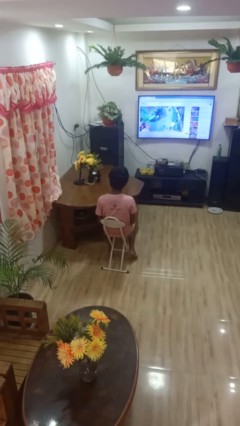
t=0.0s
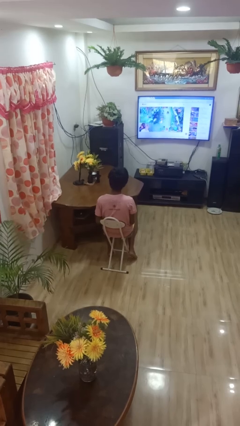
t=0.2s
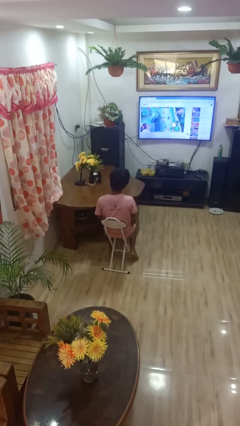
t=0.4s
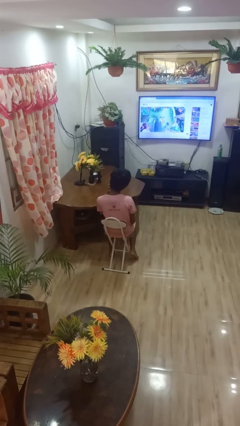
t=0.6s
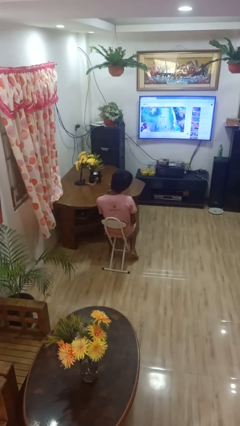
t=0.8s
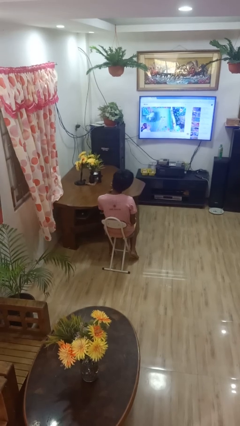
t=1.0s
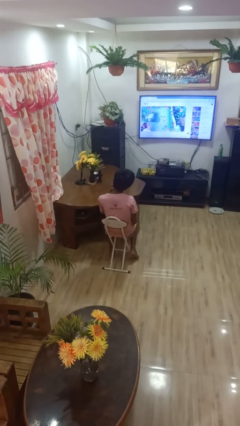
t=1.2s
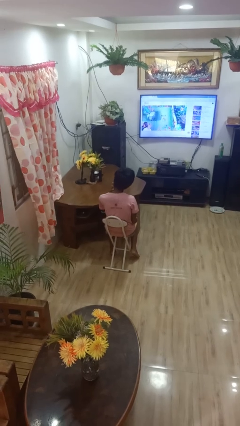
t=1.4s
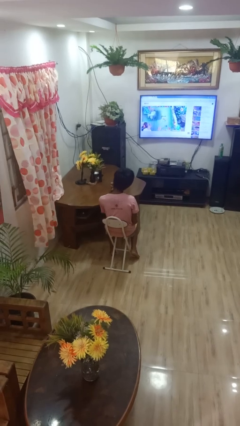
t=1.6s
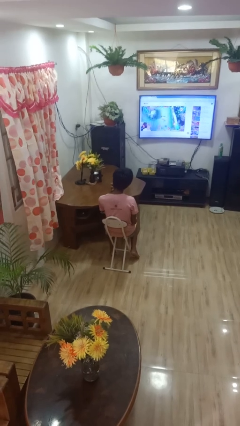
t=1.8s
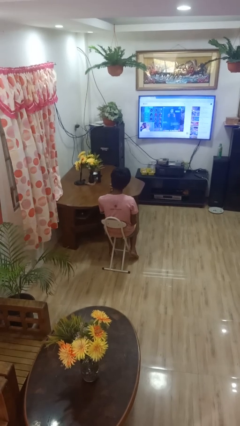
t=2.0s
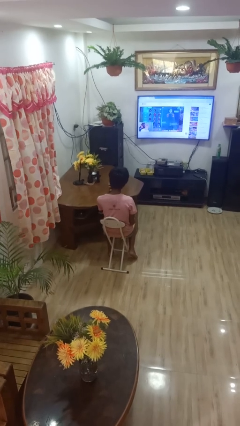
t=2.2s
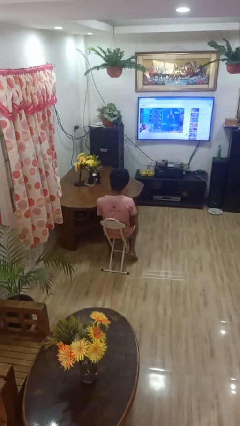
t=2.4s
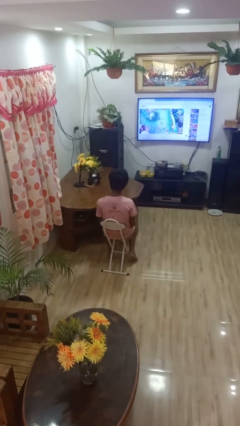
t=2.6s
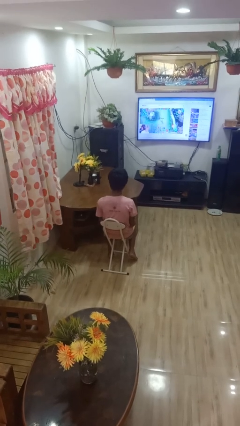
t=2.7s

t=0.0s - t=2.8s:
person rubs neck

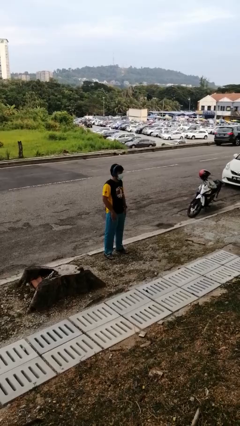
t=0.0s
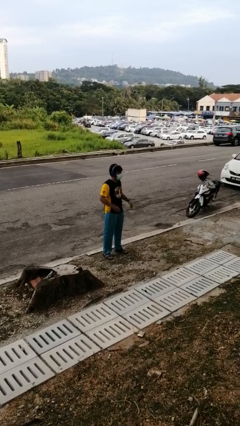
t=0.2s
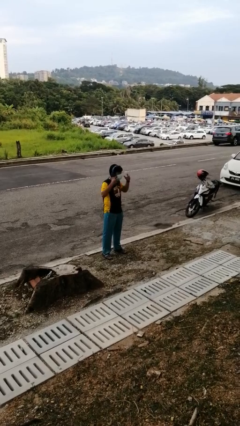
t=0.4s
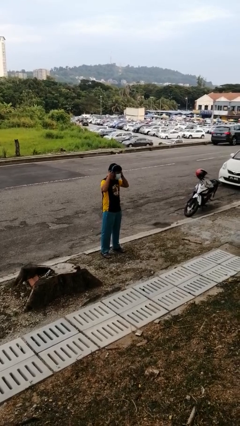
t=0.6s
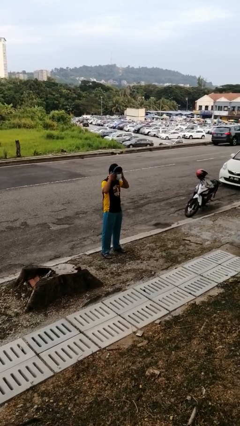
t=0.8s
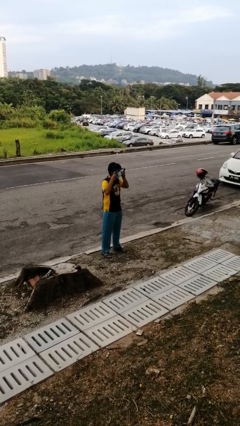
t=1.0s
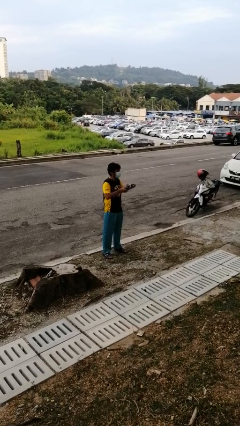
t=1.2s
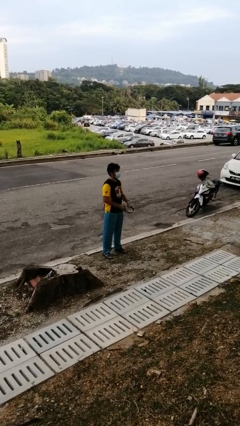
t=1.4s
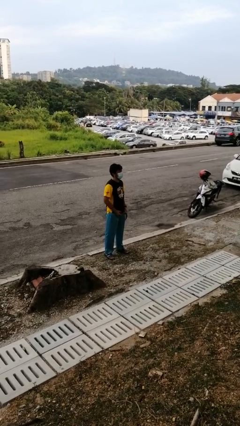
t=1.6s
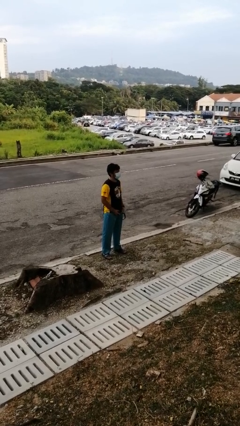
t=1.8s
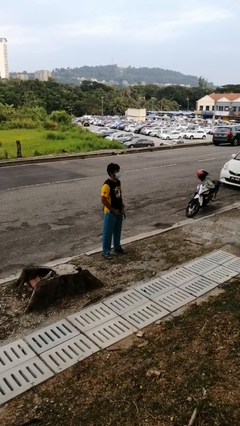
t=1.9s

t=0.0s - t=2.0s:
person takes off headphones

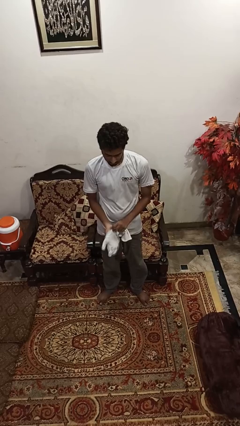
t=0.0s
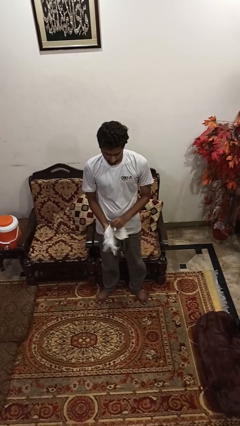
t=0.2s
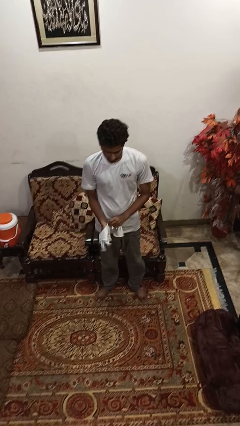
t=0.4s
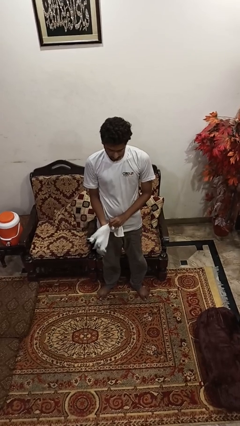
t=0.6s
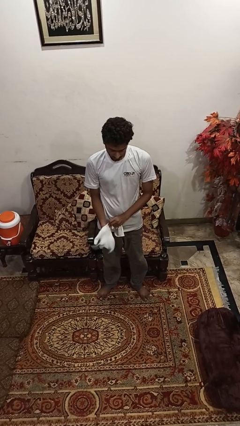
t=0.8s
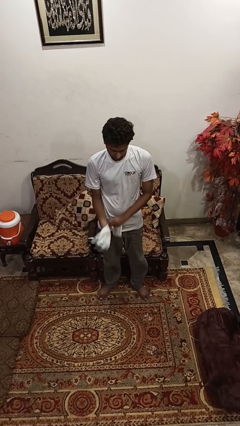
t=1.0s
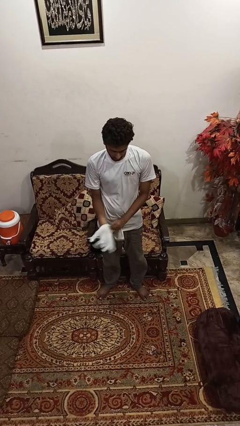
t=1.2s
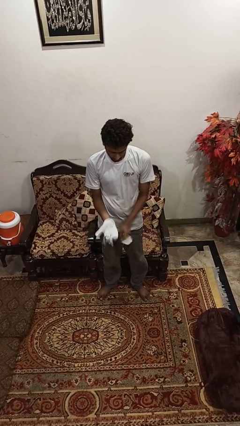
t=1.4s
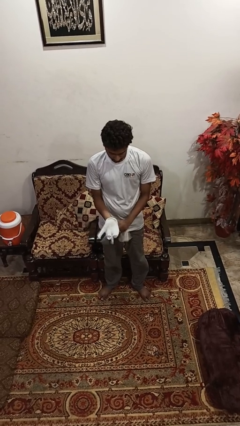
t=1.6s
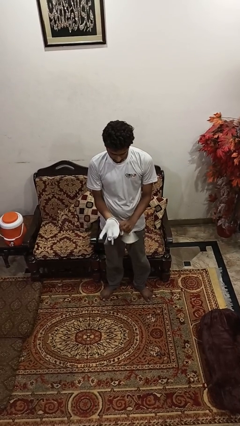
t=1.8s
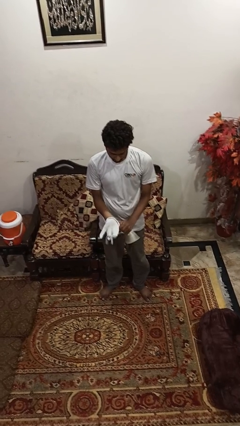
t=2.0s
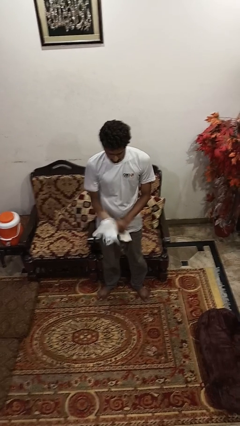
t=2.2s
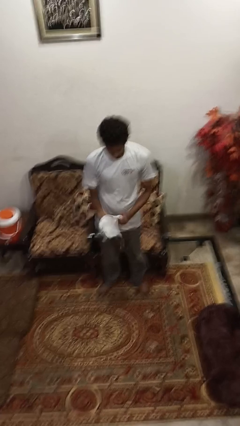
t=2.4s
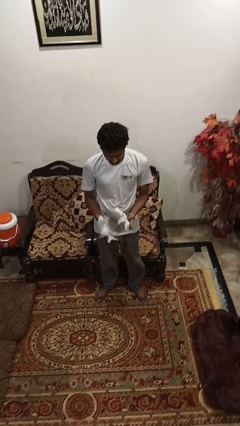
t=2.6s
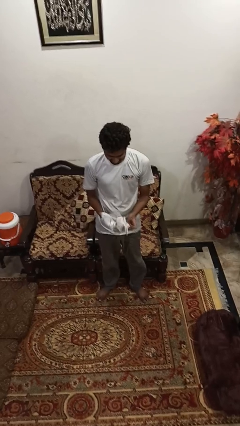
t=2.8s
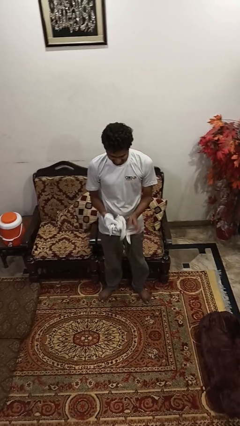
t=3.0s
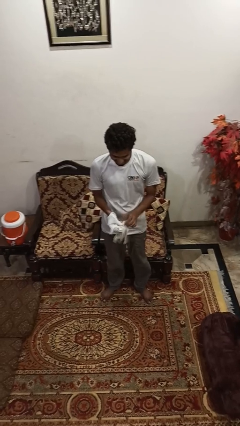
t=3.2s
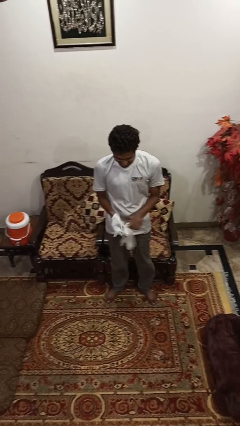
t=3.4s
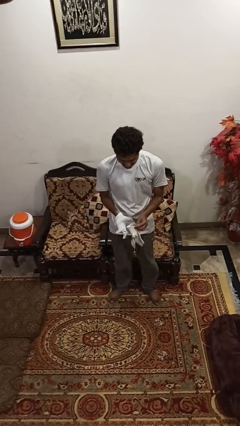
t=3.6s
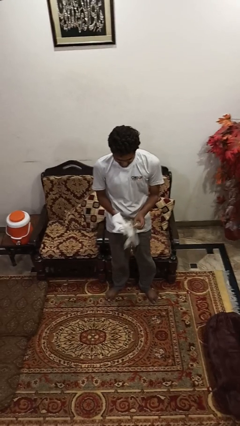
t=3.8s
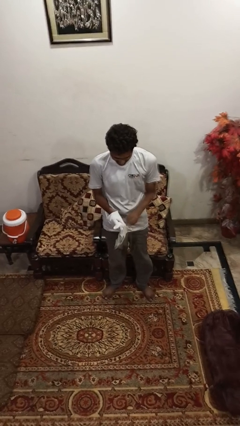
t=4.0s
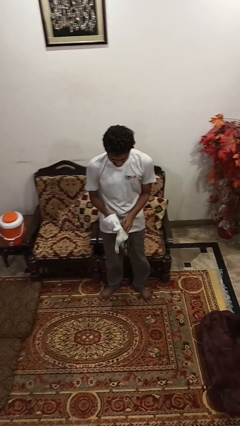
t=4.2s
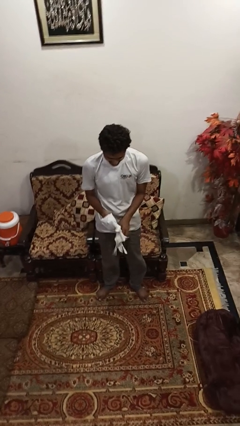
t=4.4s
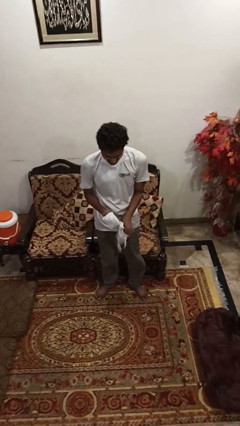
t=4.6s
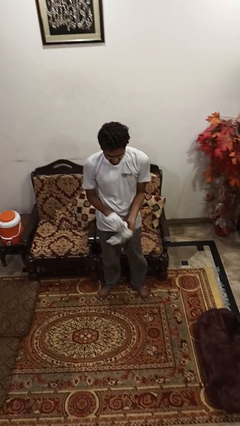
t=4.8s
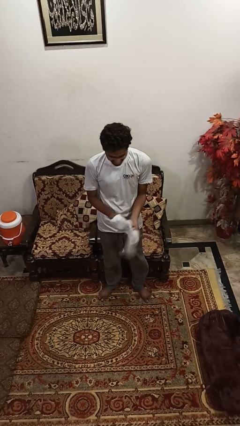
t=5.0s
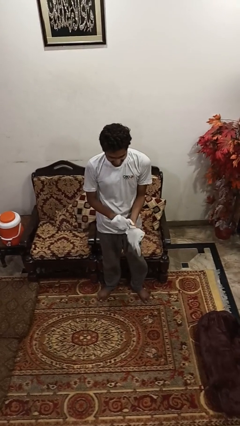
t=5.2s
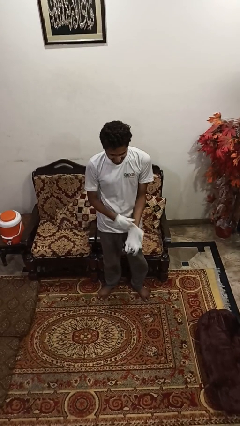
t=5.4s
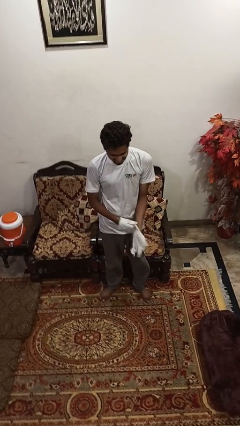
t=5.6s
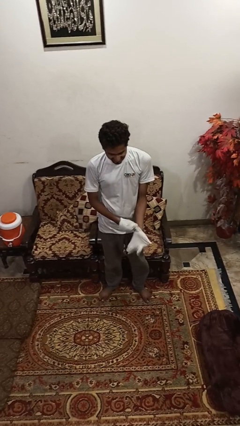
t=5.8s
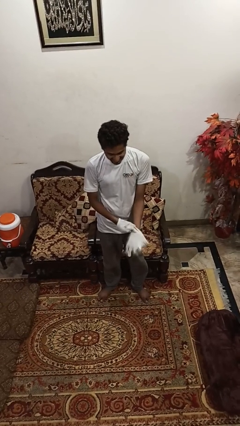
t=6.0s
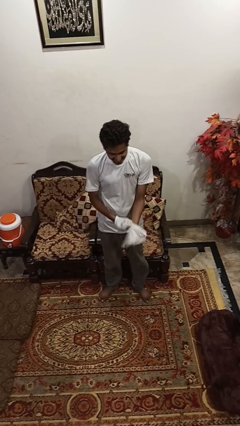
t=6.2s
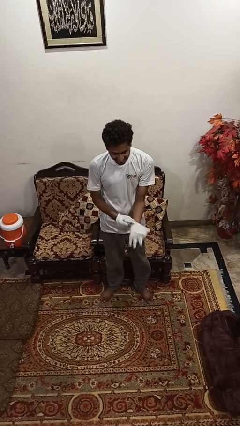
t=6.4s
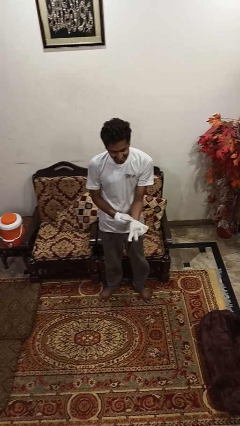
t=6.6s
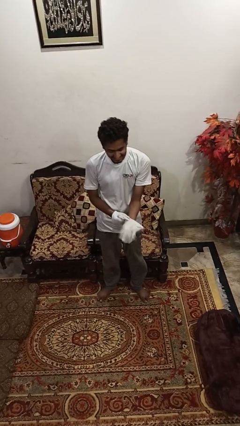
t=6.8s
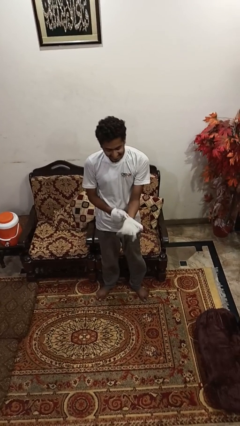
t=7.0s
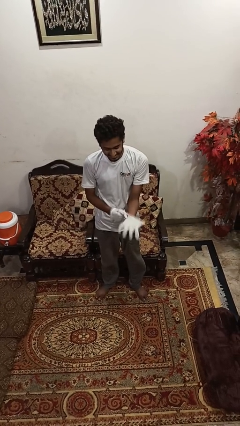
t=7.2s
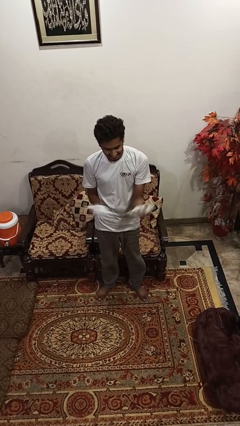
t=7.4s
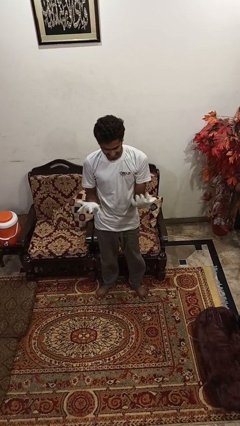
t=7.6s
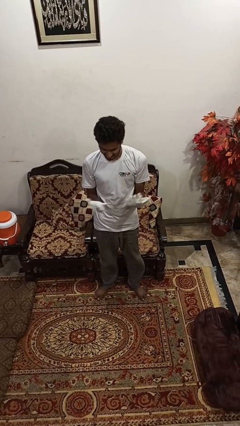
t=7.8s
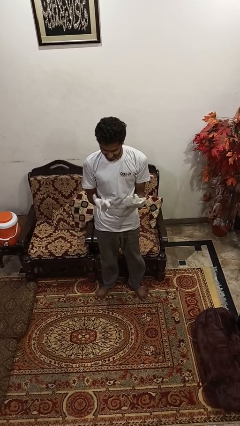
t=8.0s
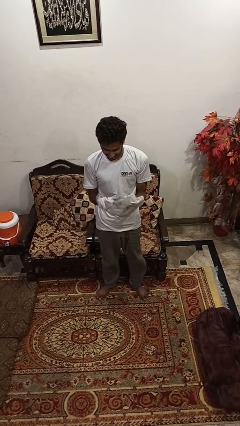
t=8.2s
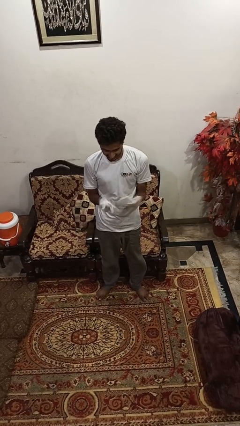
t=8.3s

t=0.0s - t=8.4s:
person puts on gloves

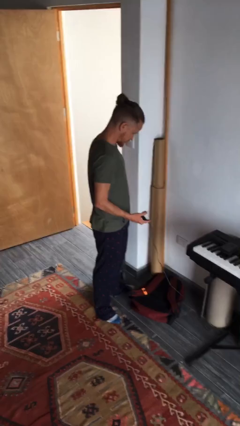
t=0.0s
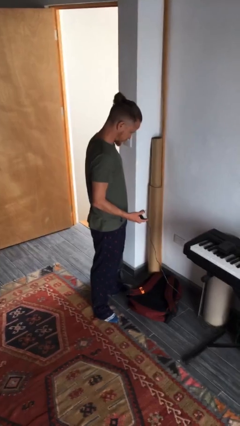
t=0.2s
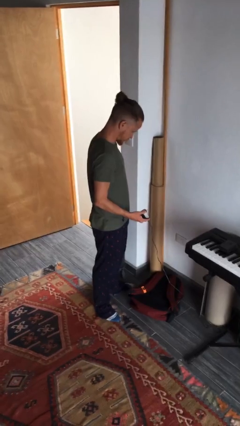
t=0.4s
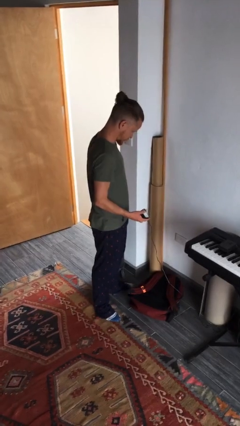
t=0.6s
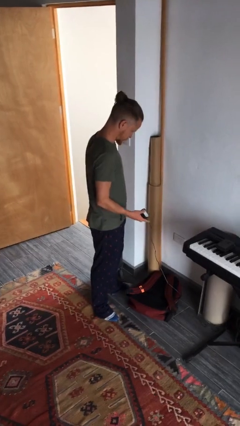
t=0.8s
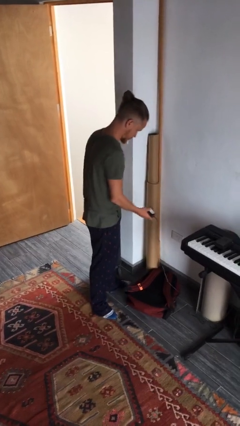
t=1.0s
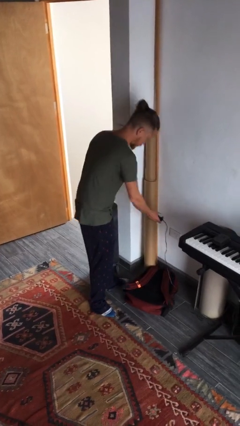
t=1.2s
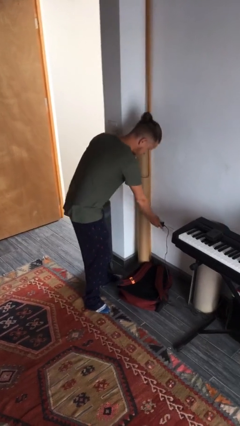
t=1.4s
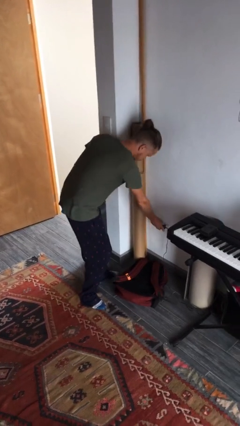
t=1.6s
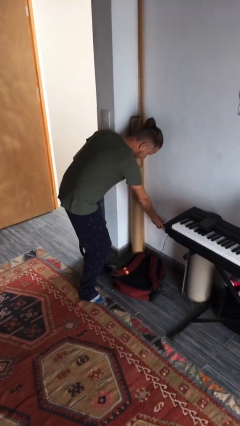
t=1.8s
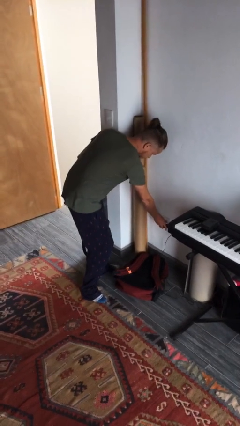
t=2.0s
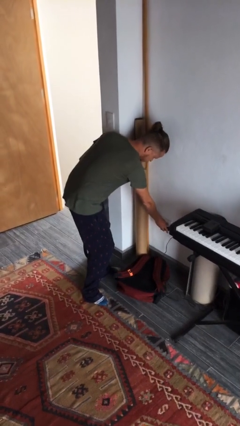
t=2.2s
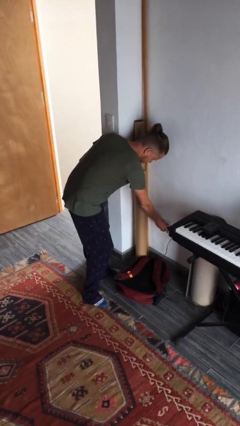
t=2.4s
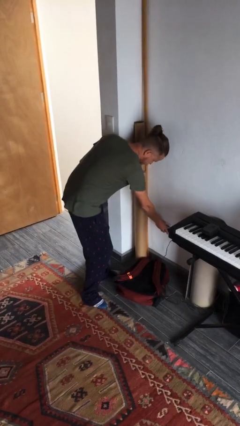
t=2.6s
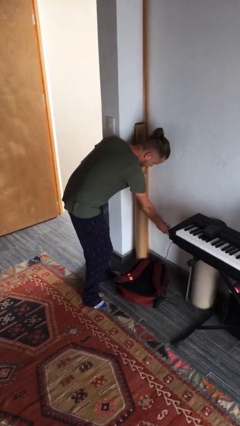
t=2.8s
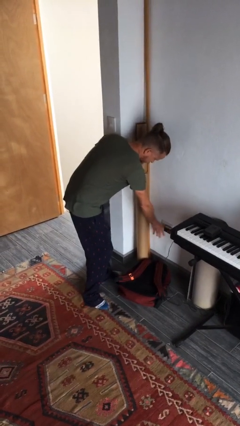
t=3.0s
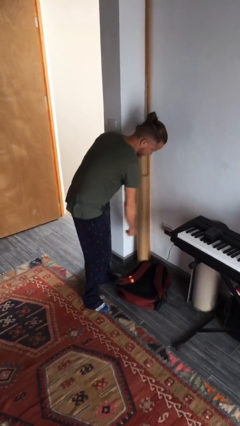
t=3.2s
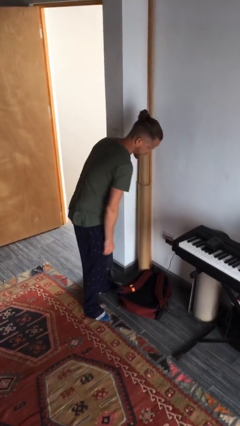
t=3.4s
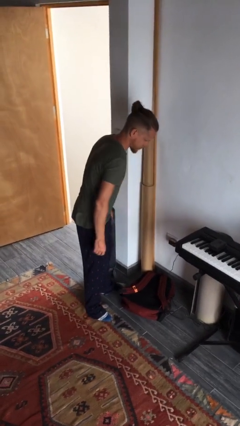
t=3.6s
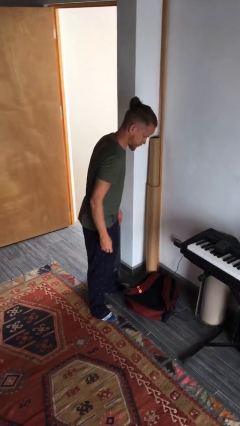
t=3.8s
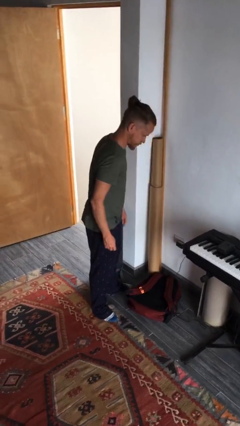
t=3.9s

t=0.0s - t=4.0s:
person plugs into electrical socket

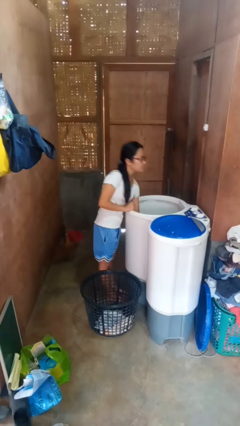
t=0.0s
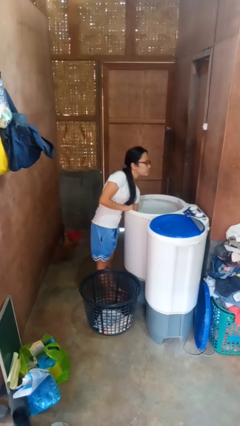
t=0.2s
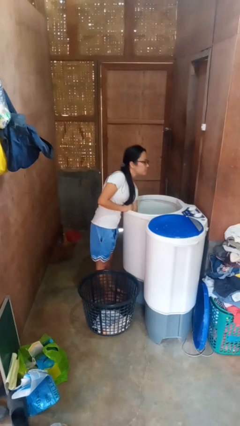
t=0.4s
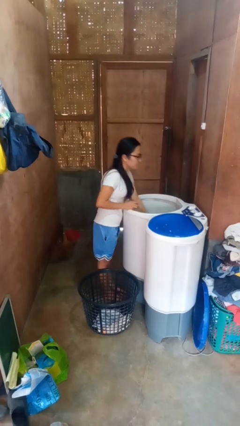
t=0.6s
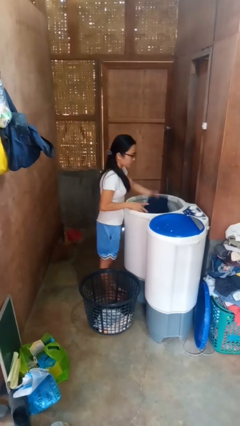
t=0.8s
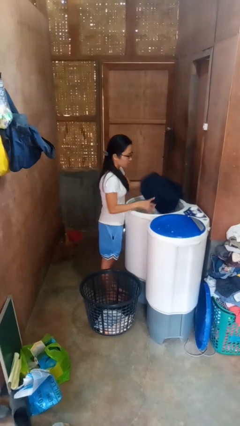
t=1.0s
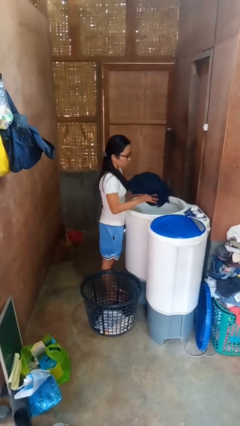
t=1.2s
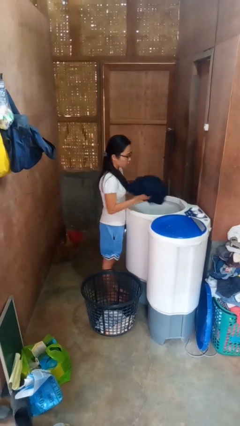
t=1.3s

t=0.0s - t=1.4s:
person unloads clotheswasher
